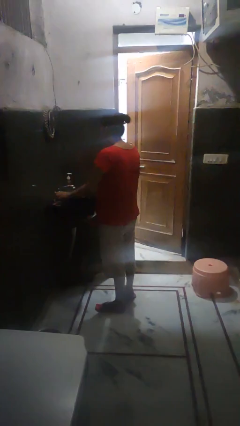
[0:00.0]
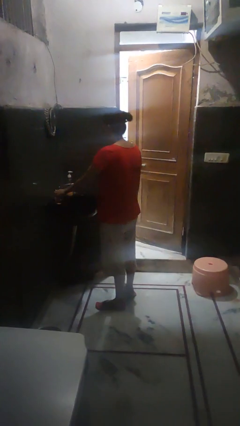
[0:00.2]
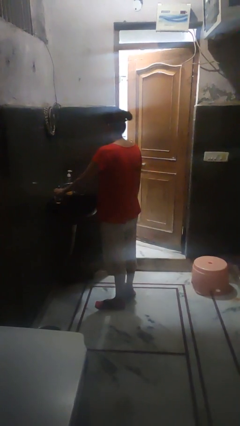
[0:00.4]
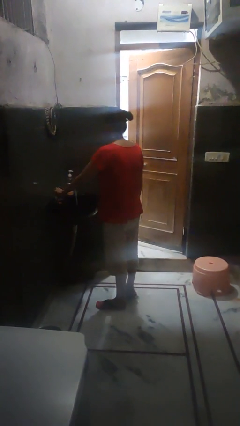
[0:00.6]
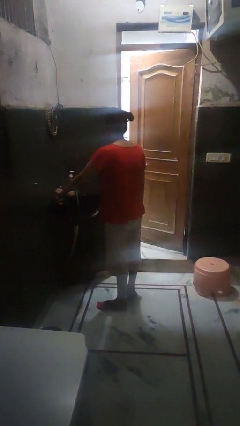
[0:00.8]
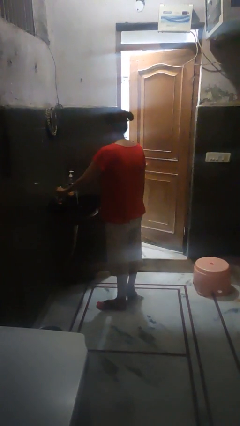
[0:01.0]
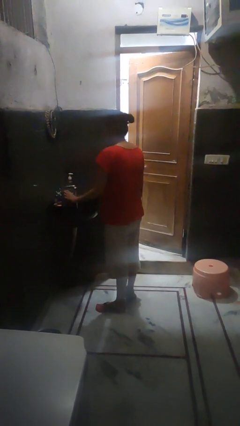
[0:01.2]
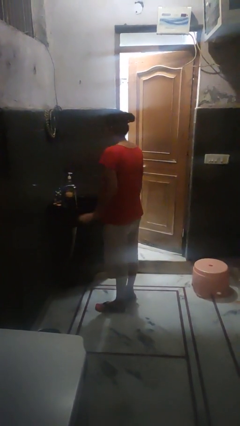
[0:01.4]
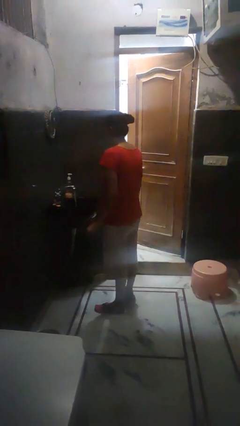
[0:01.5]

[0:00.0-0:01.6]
person turns on faucet

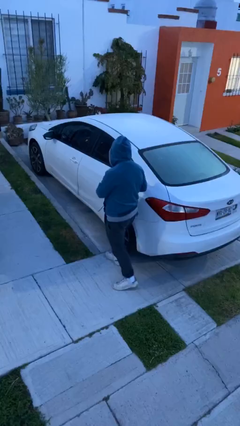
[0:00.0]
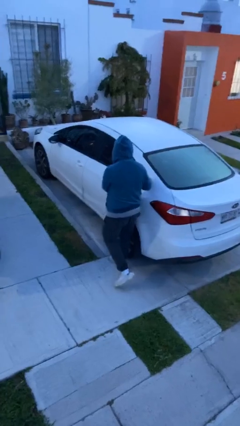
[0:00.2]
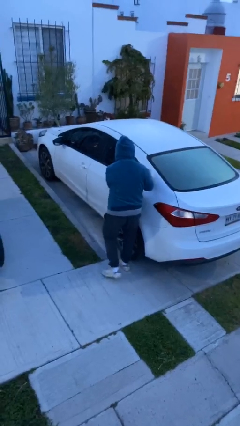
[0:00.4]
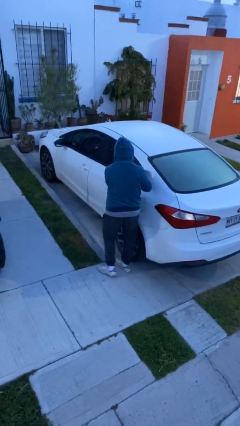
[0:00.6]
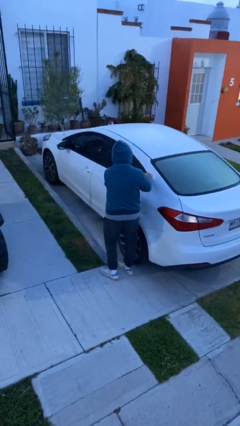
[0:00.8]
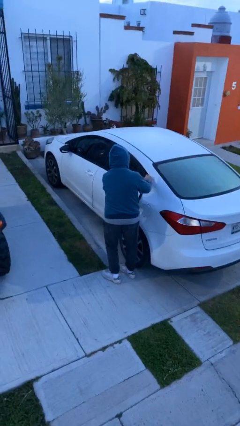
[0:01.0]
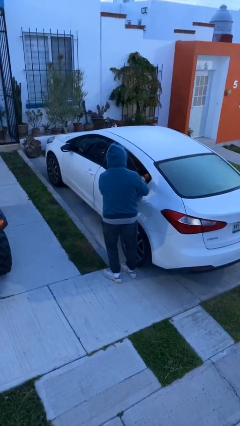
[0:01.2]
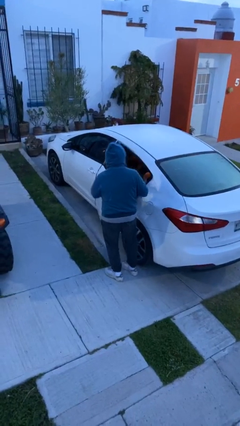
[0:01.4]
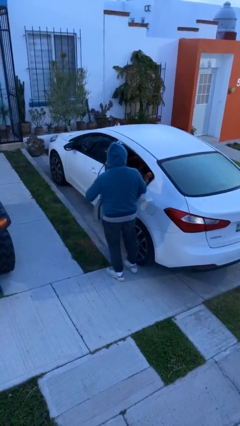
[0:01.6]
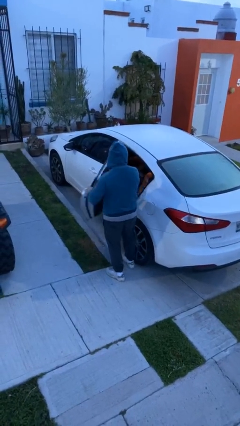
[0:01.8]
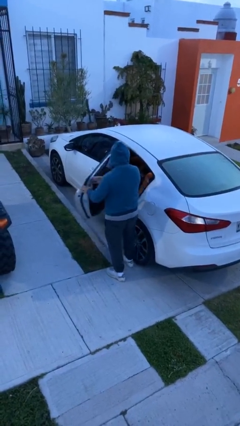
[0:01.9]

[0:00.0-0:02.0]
person opens car door

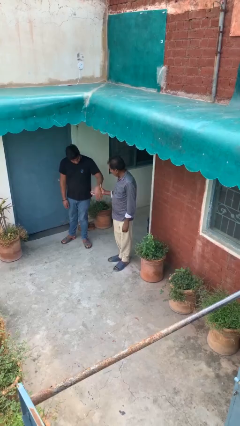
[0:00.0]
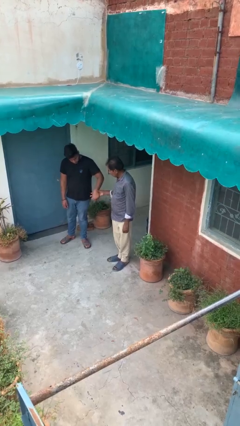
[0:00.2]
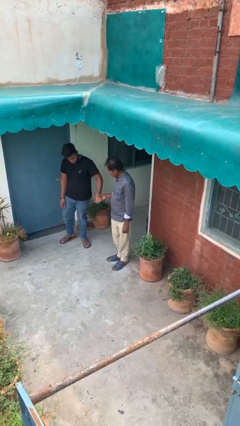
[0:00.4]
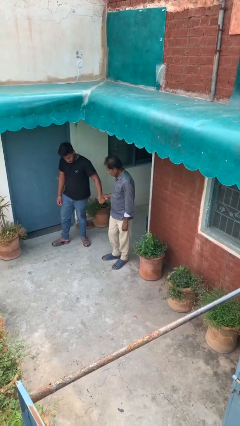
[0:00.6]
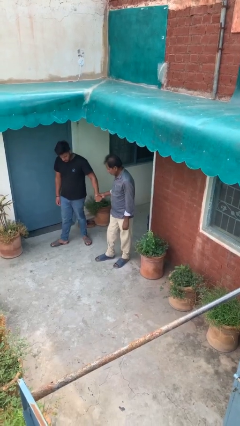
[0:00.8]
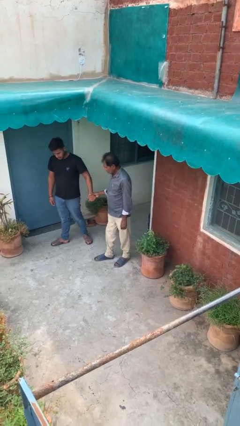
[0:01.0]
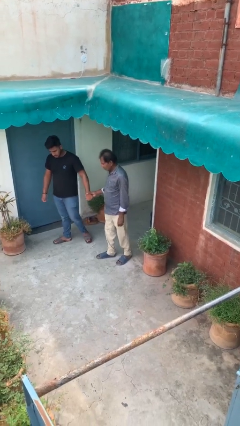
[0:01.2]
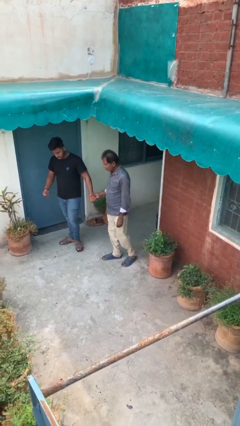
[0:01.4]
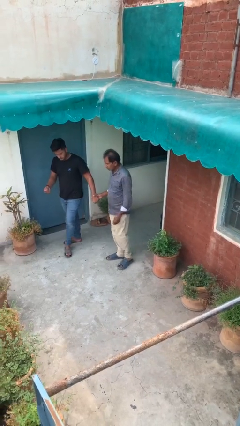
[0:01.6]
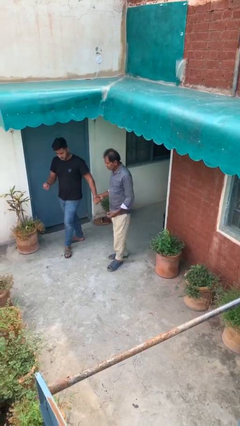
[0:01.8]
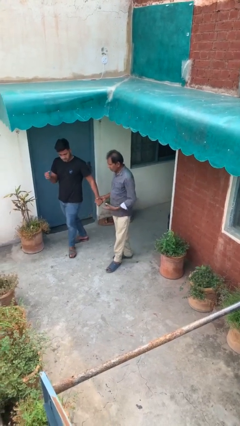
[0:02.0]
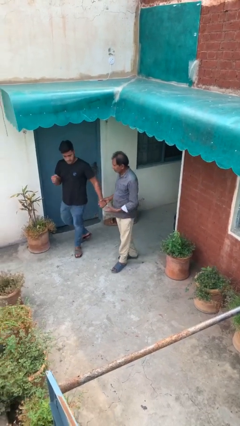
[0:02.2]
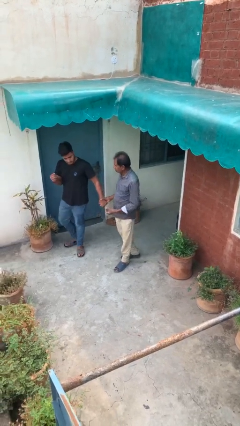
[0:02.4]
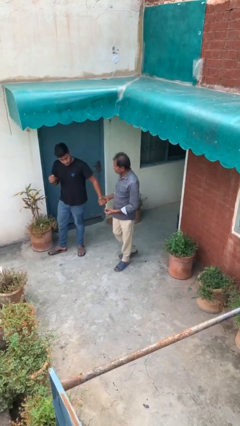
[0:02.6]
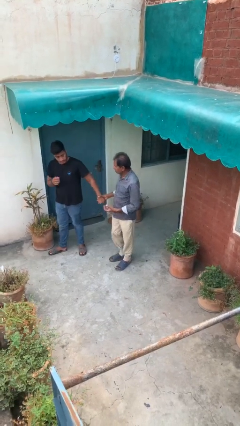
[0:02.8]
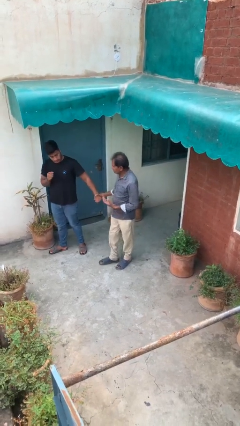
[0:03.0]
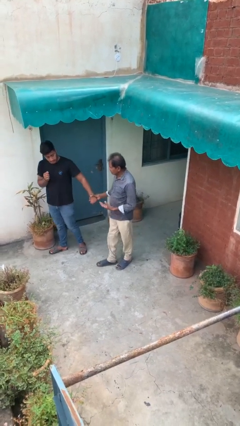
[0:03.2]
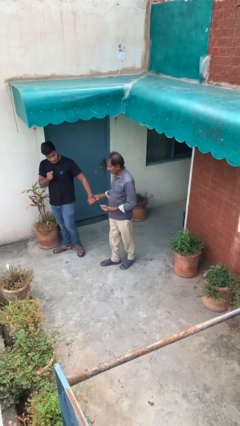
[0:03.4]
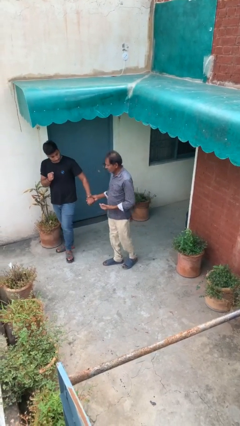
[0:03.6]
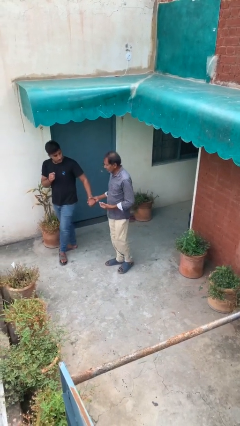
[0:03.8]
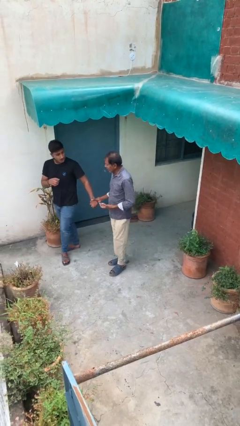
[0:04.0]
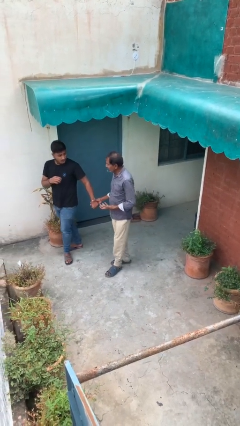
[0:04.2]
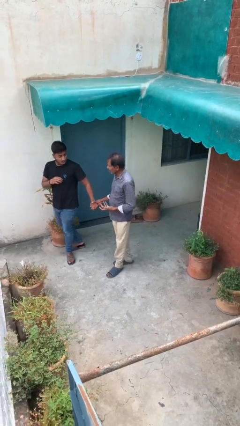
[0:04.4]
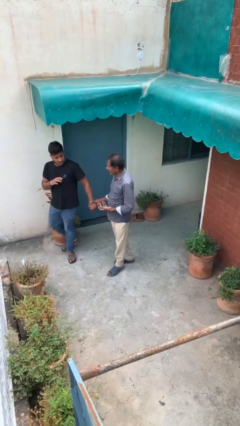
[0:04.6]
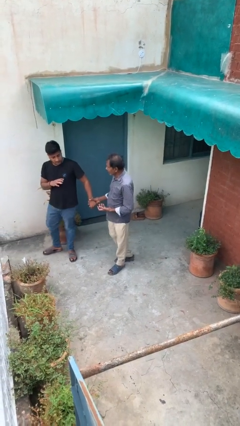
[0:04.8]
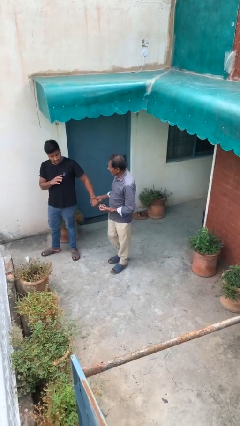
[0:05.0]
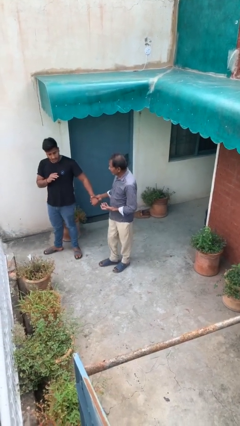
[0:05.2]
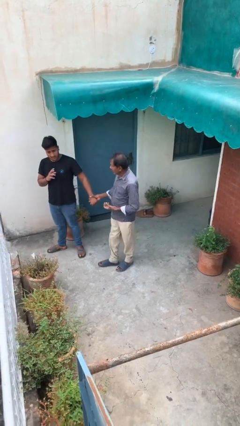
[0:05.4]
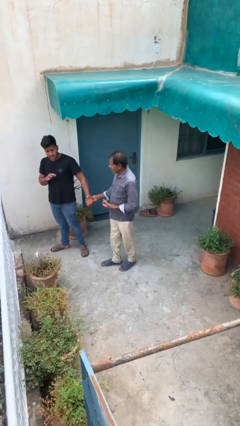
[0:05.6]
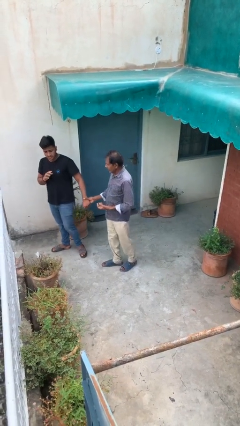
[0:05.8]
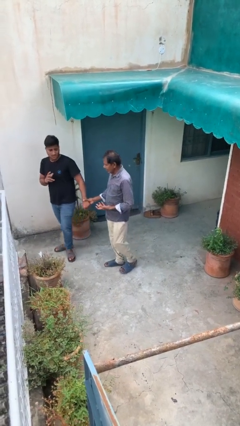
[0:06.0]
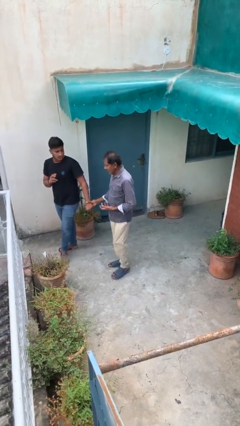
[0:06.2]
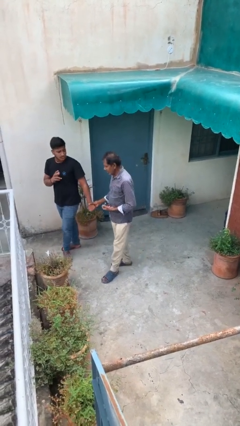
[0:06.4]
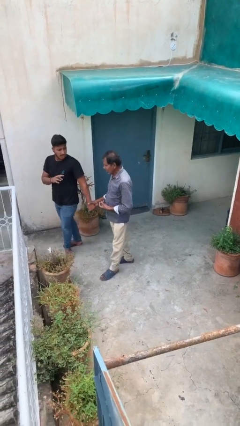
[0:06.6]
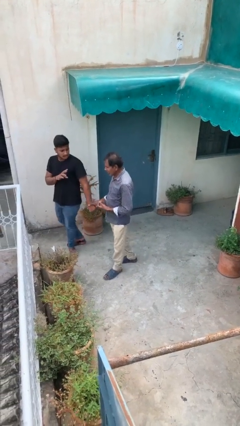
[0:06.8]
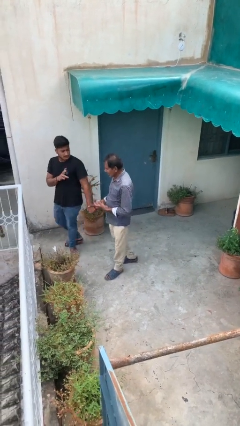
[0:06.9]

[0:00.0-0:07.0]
person holds hand

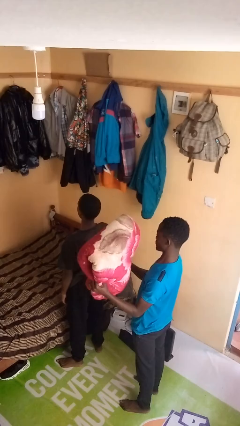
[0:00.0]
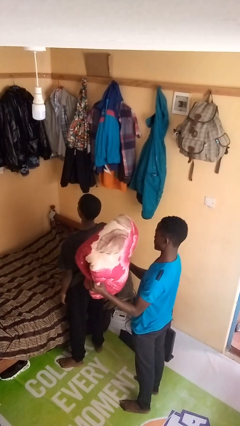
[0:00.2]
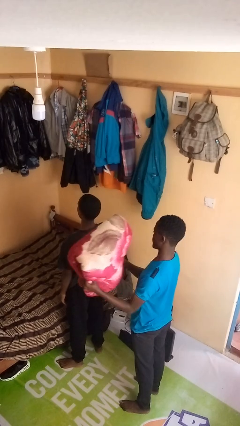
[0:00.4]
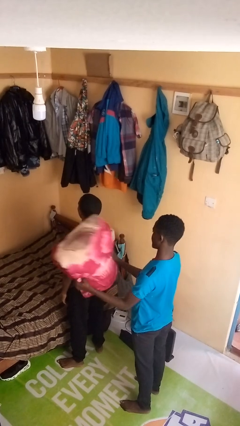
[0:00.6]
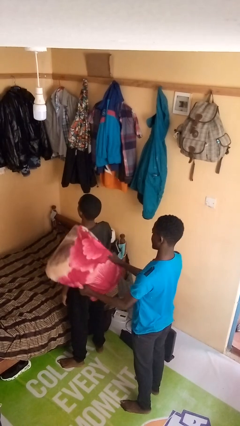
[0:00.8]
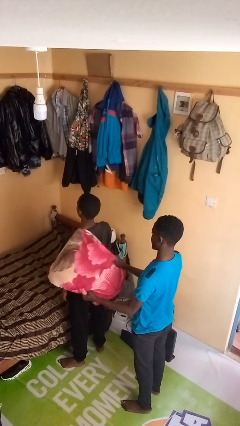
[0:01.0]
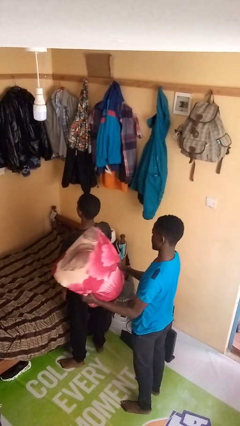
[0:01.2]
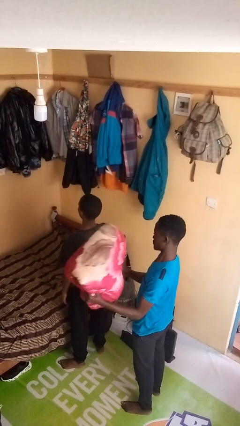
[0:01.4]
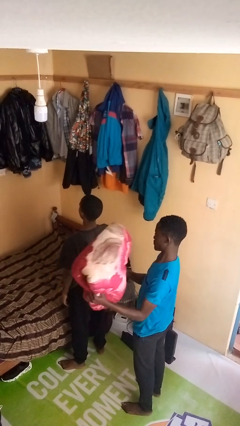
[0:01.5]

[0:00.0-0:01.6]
person hits person with pillow

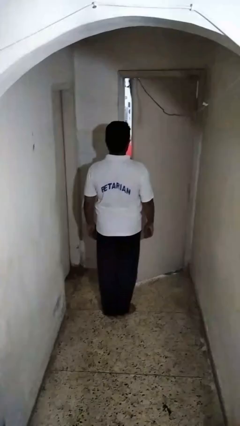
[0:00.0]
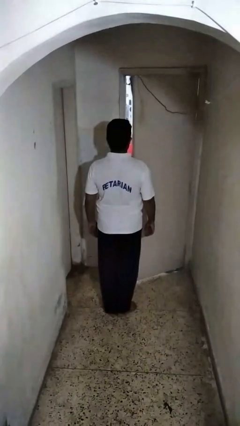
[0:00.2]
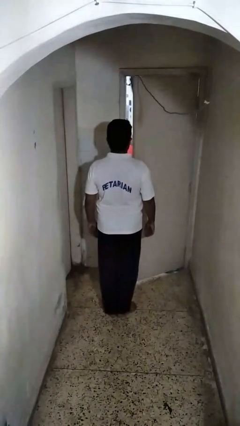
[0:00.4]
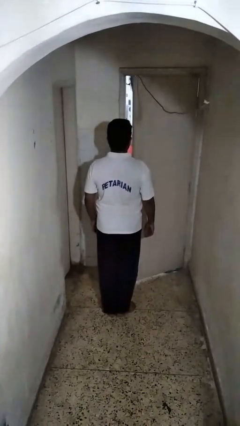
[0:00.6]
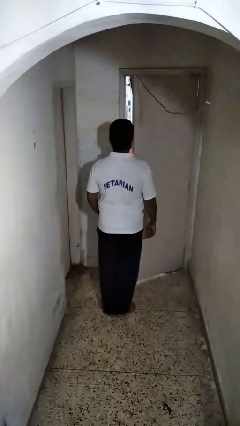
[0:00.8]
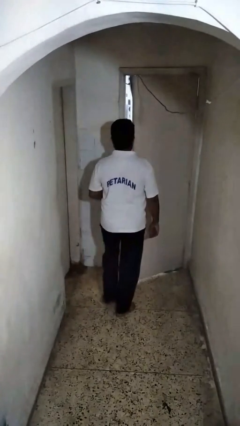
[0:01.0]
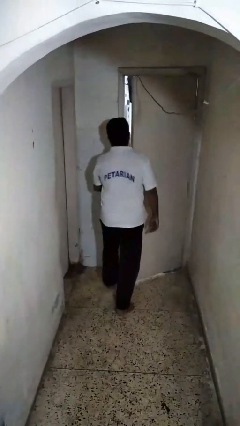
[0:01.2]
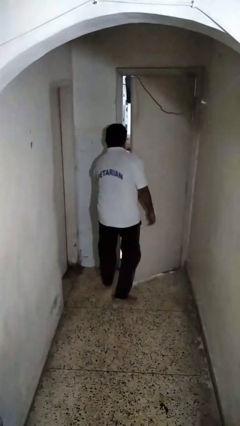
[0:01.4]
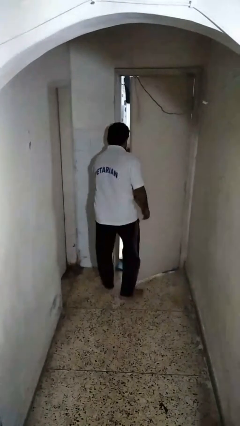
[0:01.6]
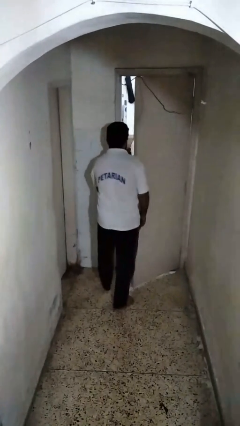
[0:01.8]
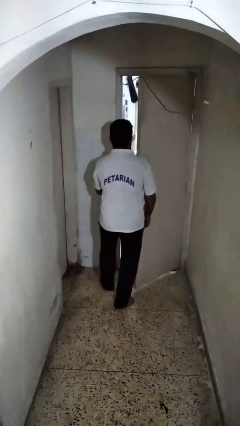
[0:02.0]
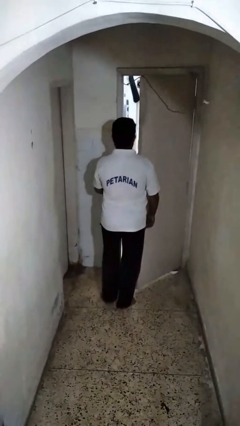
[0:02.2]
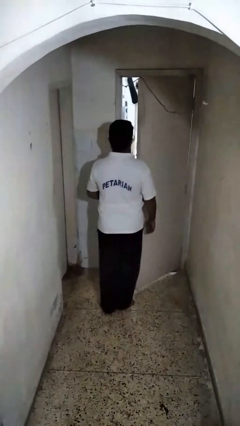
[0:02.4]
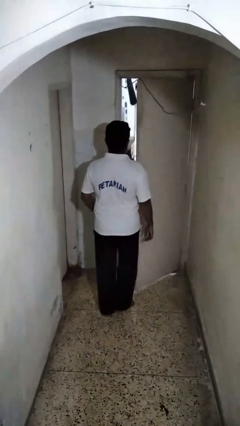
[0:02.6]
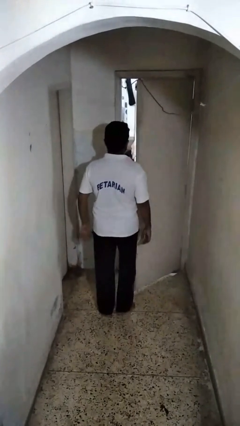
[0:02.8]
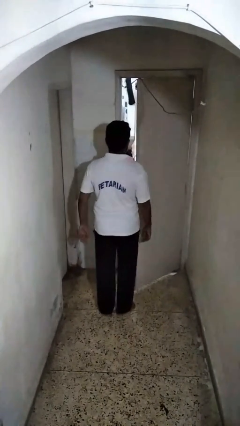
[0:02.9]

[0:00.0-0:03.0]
person bumps into wall

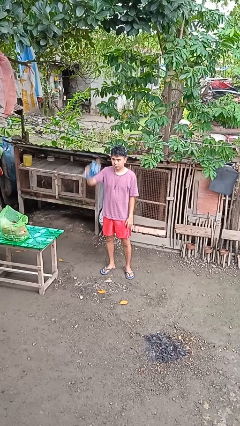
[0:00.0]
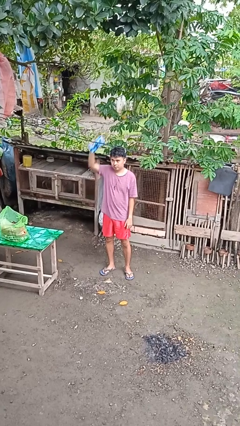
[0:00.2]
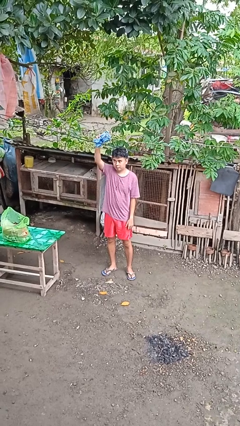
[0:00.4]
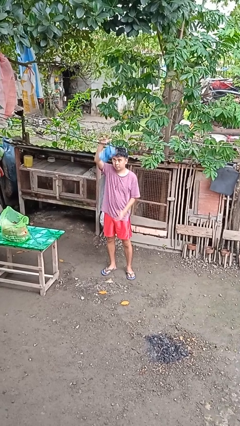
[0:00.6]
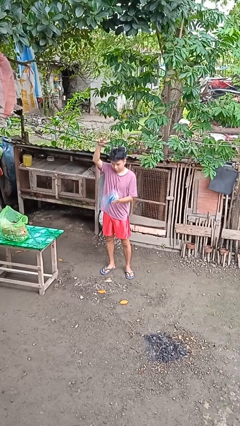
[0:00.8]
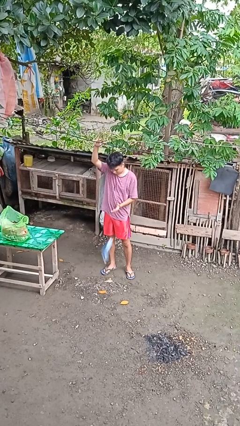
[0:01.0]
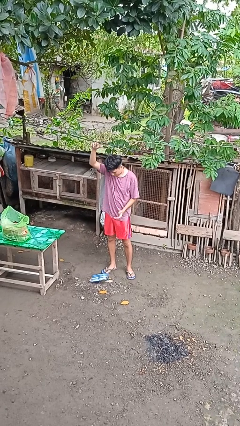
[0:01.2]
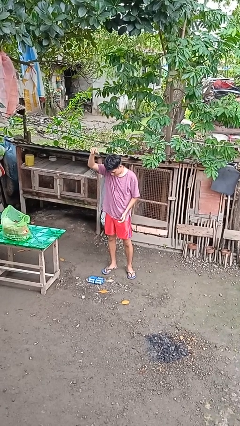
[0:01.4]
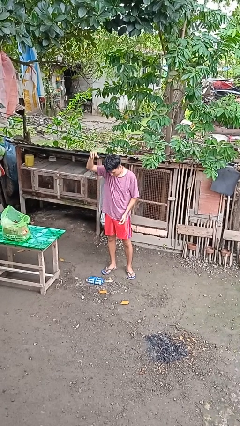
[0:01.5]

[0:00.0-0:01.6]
person drops object

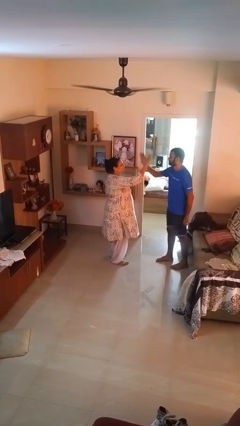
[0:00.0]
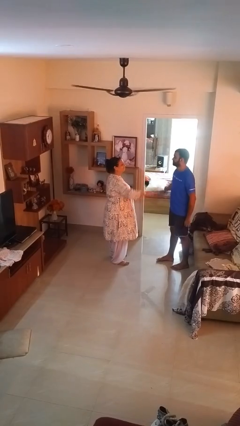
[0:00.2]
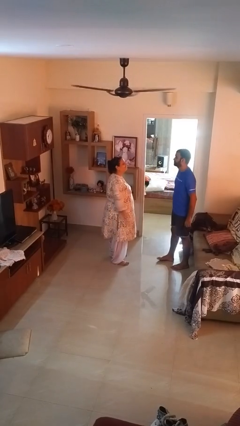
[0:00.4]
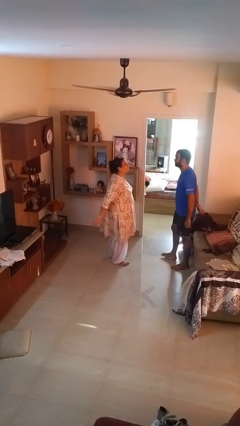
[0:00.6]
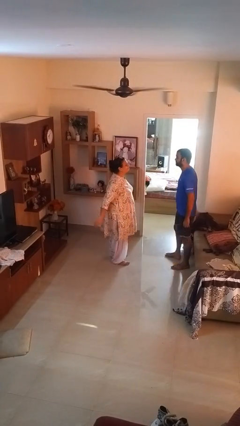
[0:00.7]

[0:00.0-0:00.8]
person highfives hand
